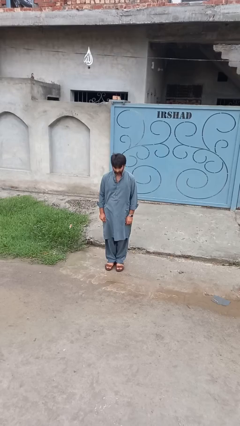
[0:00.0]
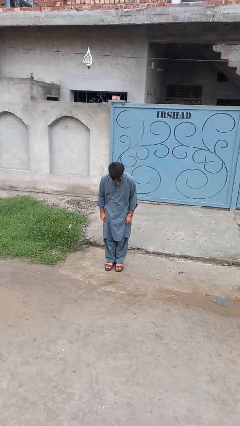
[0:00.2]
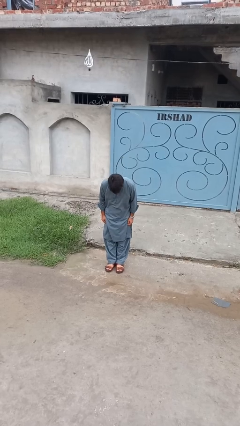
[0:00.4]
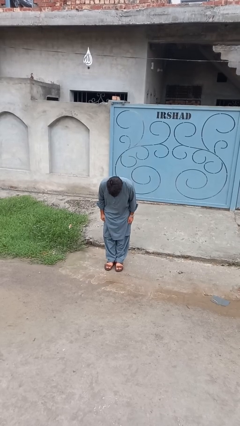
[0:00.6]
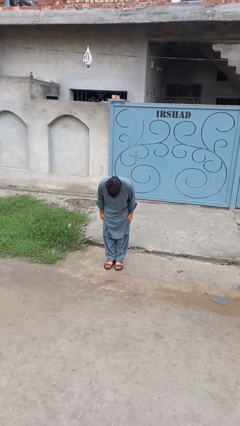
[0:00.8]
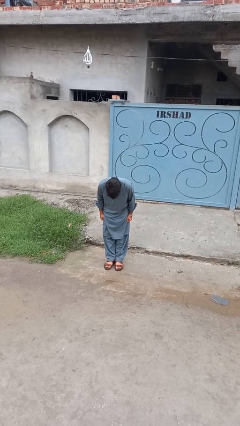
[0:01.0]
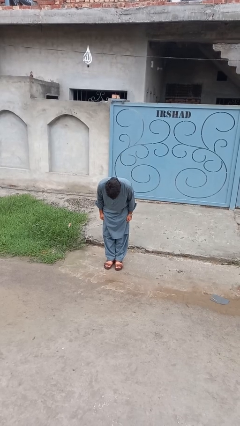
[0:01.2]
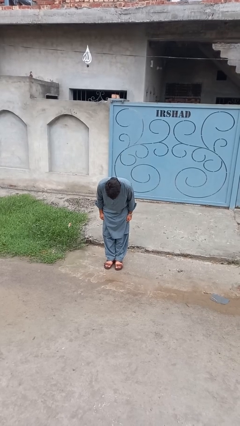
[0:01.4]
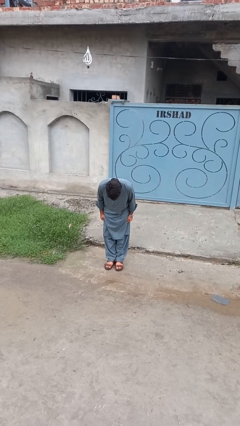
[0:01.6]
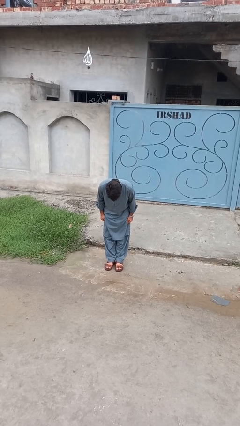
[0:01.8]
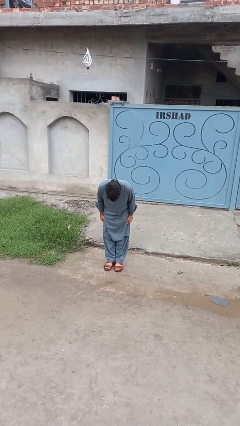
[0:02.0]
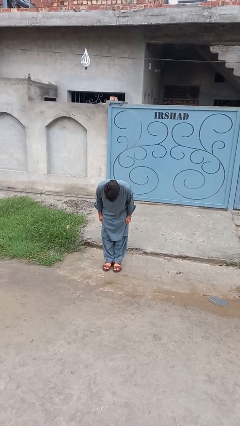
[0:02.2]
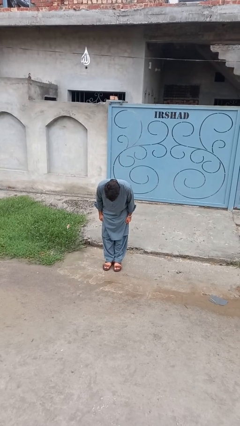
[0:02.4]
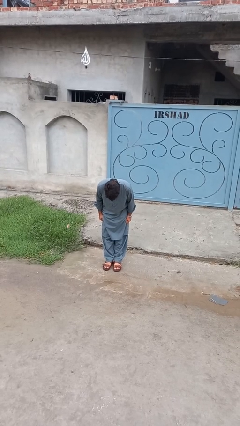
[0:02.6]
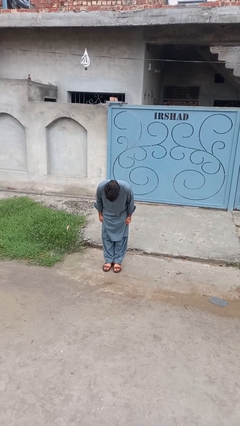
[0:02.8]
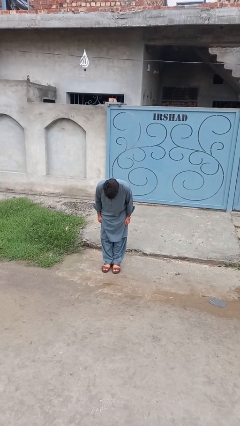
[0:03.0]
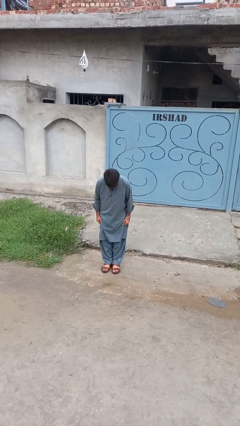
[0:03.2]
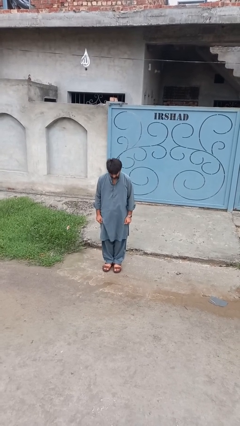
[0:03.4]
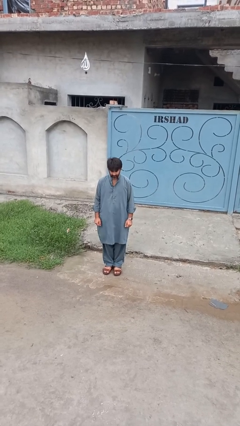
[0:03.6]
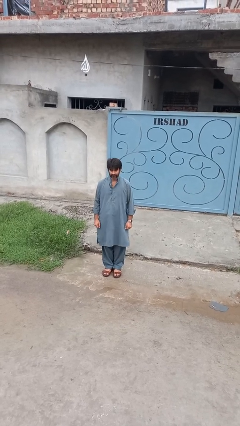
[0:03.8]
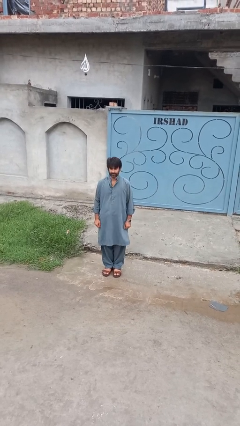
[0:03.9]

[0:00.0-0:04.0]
person bows

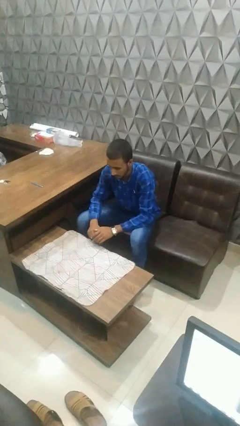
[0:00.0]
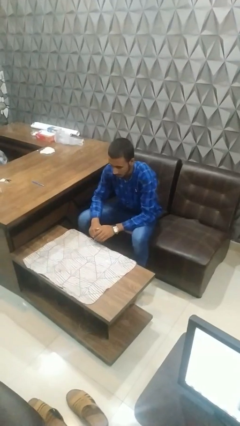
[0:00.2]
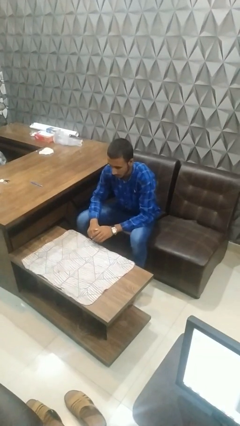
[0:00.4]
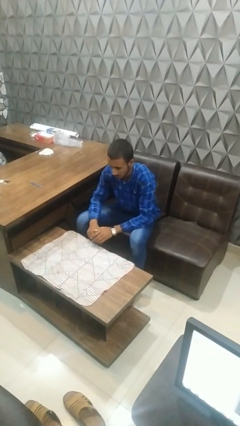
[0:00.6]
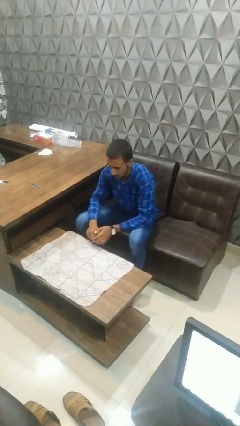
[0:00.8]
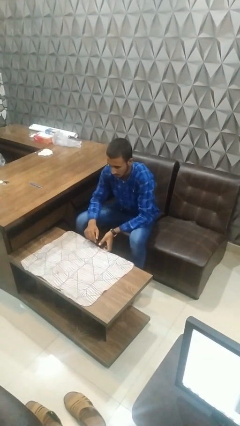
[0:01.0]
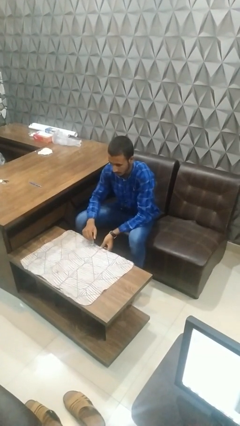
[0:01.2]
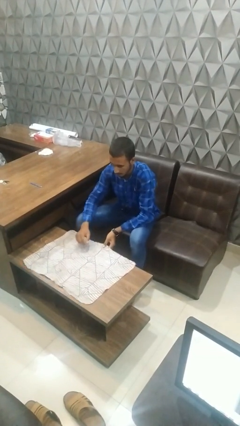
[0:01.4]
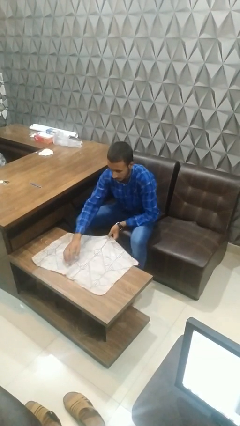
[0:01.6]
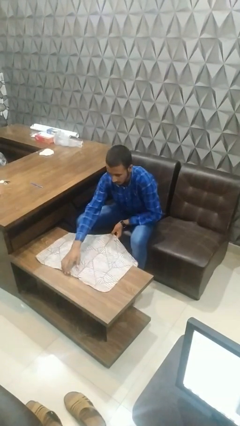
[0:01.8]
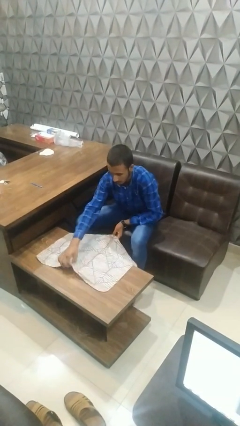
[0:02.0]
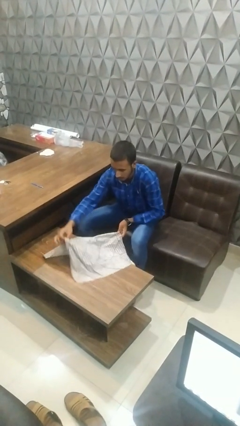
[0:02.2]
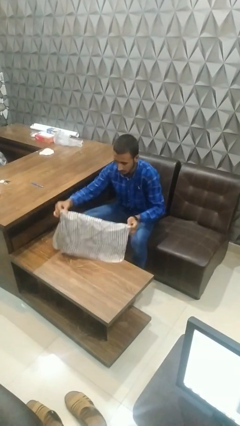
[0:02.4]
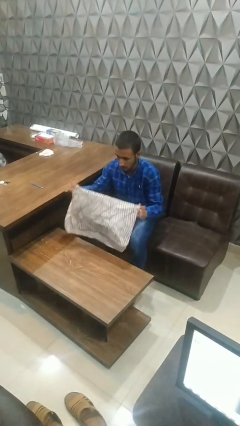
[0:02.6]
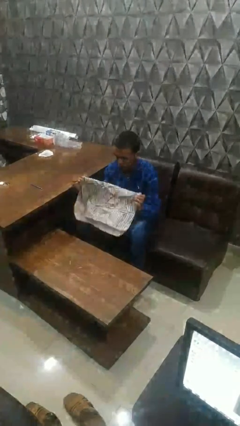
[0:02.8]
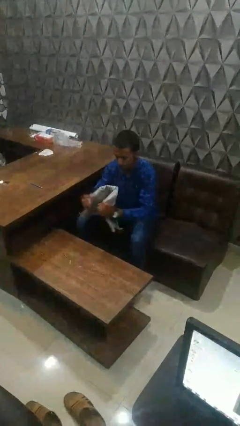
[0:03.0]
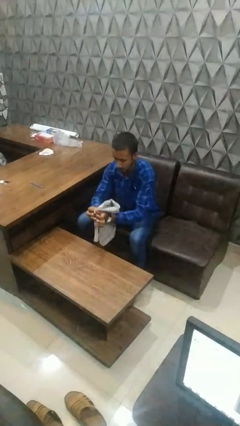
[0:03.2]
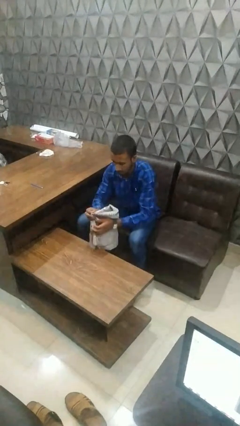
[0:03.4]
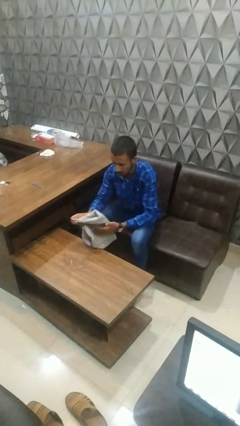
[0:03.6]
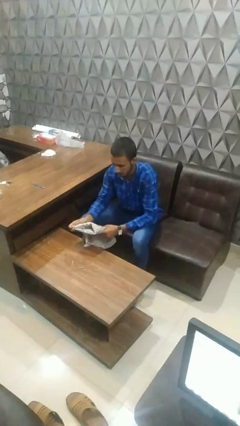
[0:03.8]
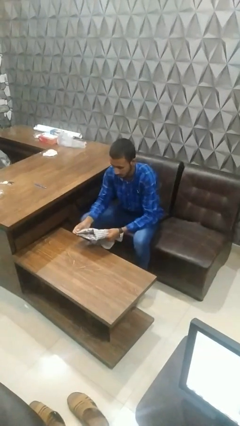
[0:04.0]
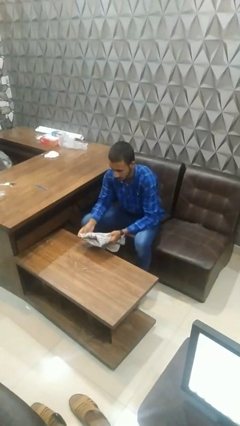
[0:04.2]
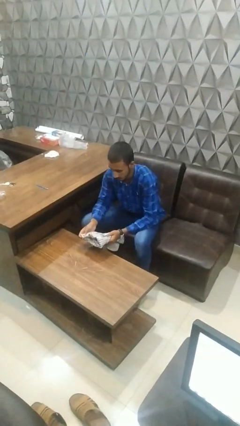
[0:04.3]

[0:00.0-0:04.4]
person folds tablecloth

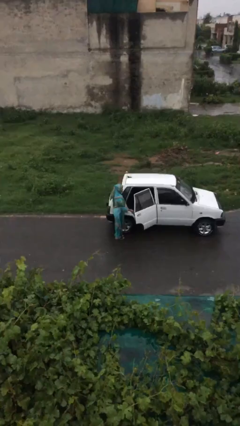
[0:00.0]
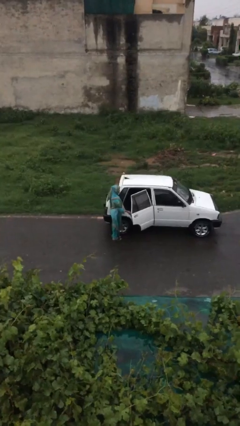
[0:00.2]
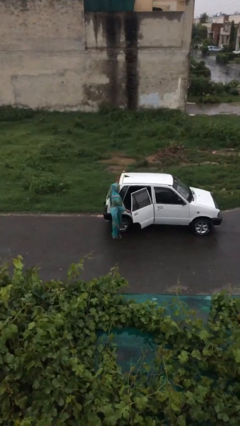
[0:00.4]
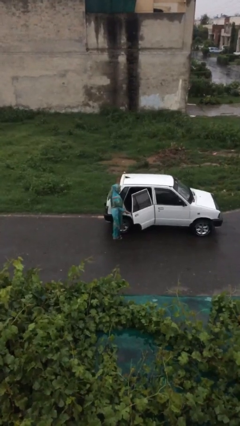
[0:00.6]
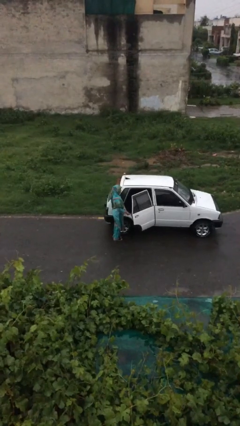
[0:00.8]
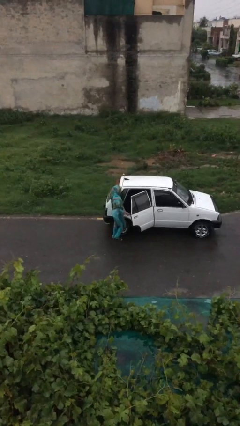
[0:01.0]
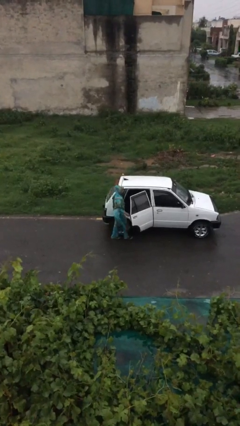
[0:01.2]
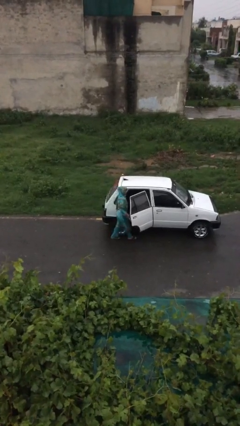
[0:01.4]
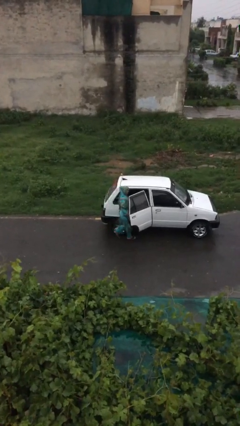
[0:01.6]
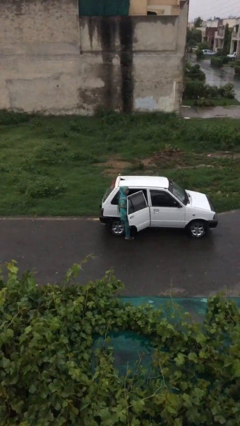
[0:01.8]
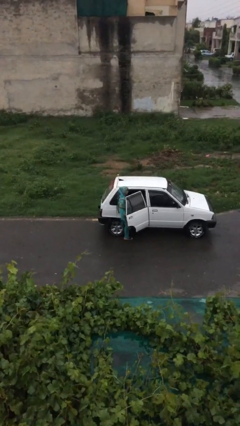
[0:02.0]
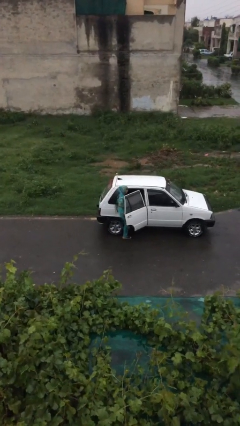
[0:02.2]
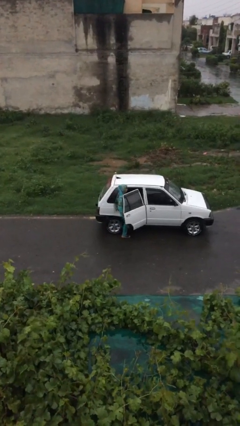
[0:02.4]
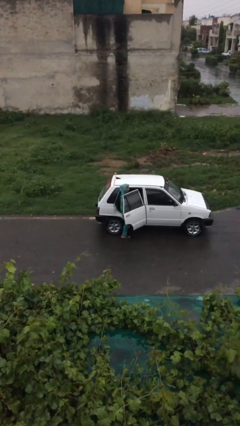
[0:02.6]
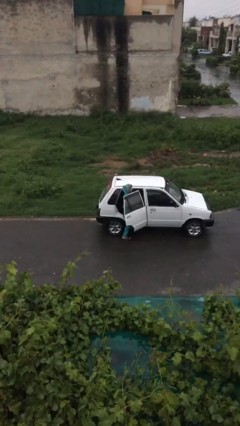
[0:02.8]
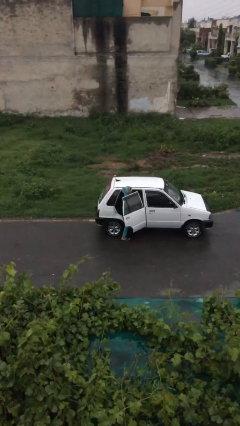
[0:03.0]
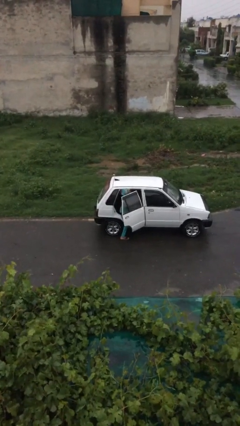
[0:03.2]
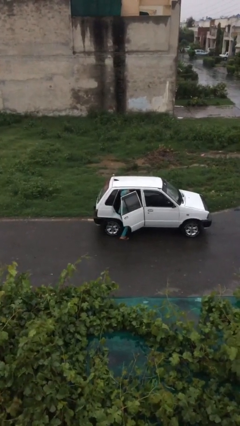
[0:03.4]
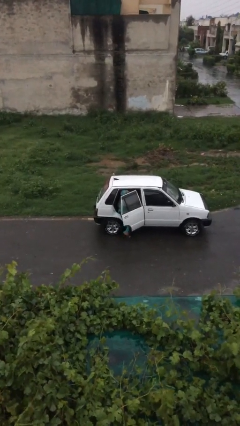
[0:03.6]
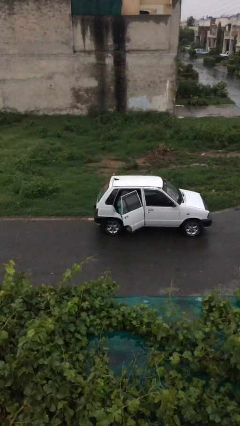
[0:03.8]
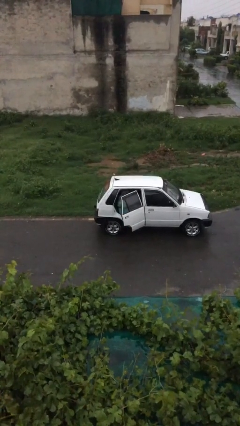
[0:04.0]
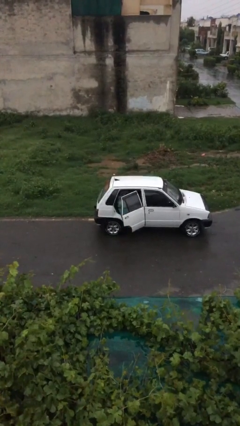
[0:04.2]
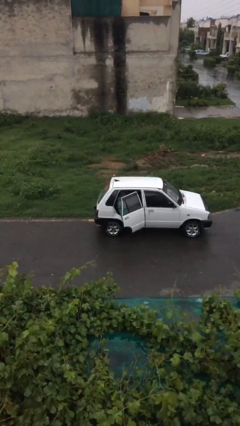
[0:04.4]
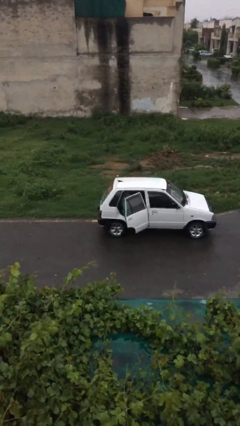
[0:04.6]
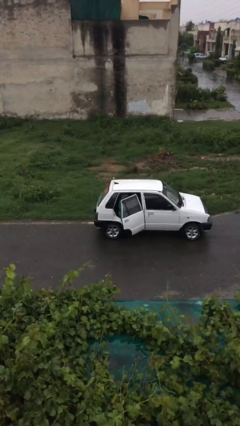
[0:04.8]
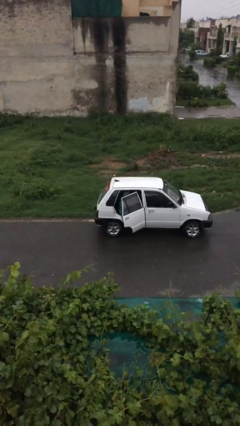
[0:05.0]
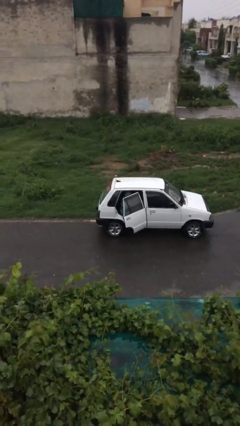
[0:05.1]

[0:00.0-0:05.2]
person enters car

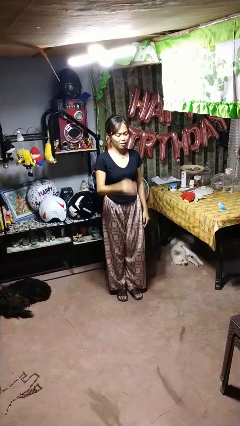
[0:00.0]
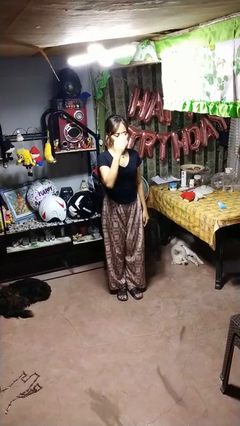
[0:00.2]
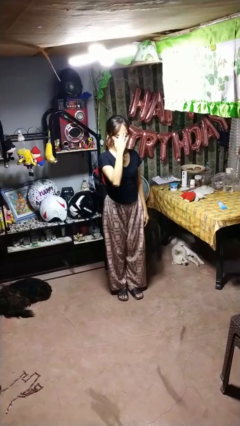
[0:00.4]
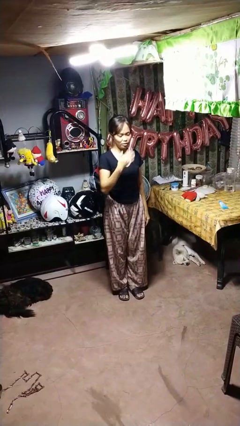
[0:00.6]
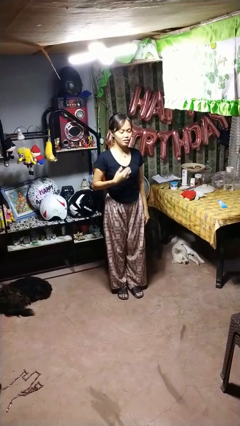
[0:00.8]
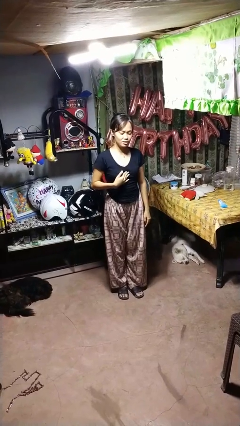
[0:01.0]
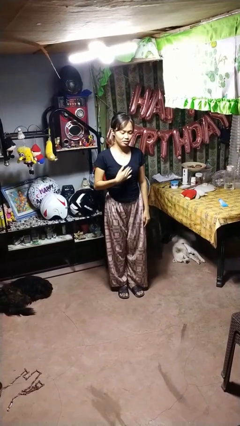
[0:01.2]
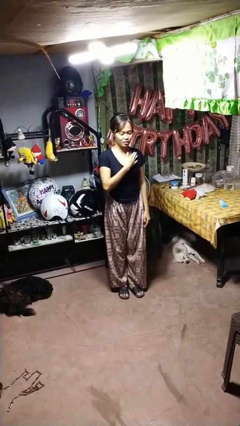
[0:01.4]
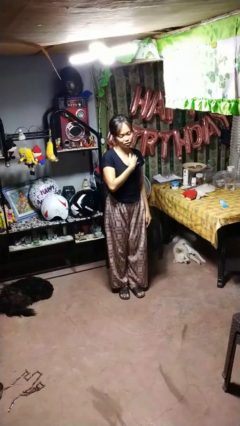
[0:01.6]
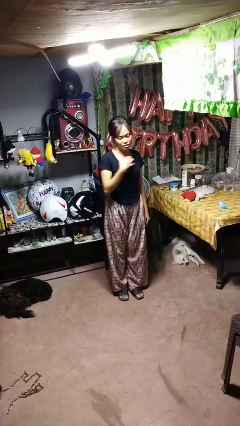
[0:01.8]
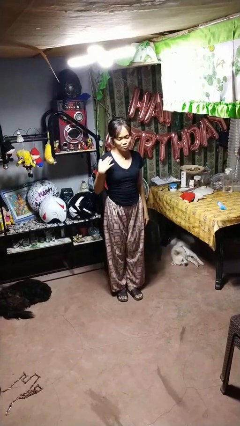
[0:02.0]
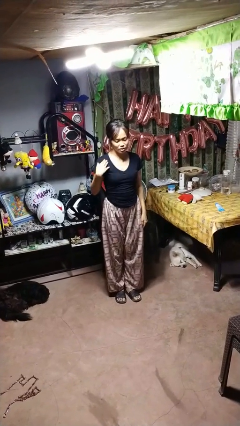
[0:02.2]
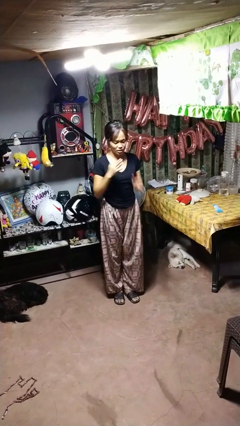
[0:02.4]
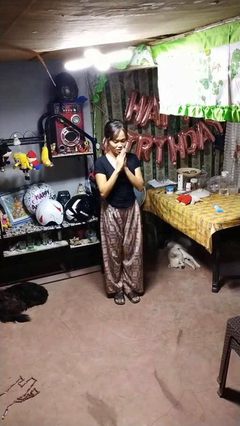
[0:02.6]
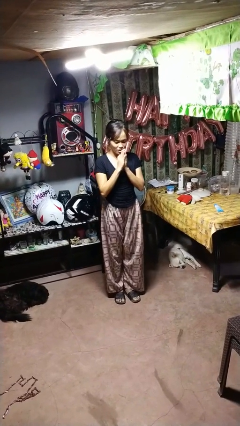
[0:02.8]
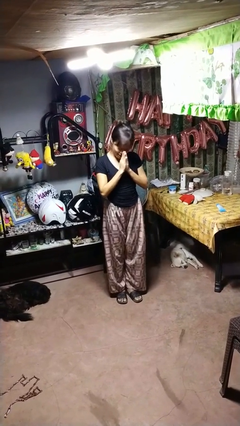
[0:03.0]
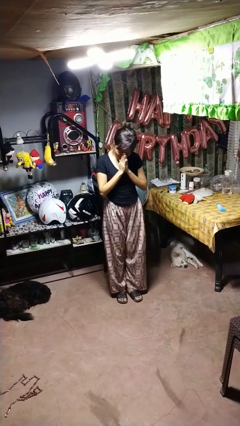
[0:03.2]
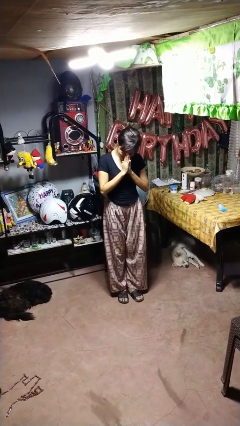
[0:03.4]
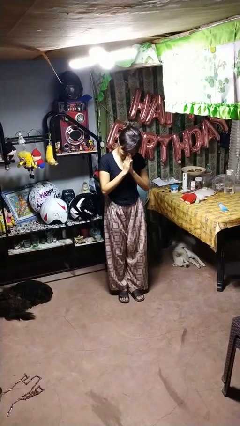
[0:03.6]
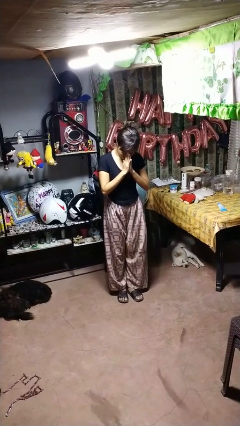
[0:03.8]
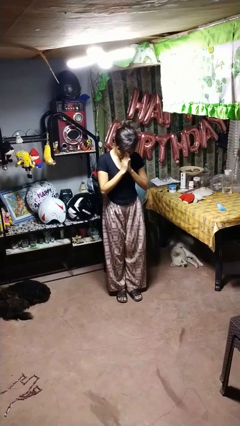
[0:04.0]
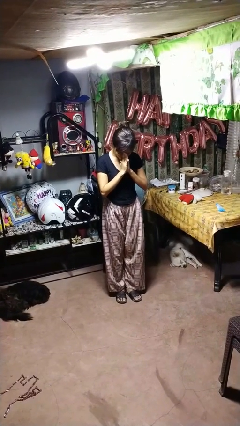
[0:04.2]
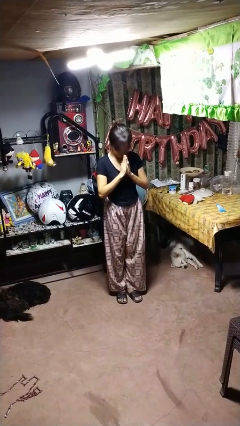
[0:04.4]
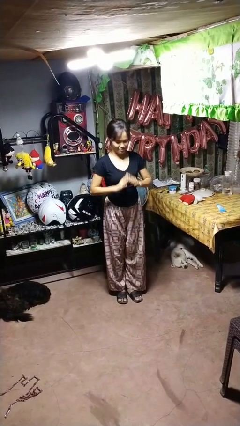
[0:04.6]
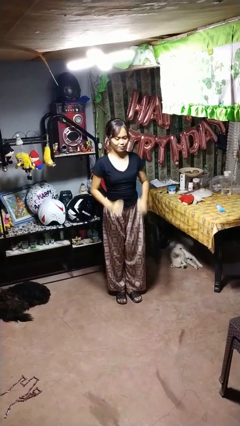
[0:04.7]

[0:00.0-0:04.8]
person prays
